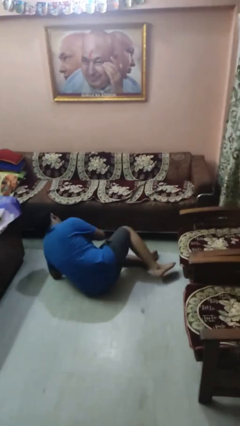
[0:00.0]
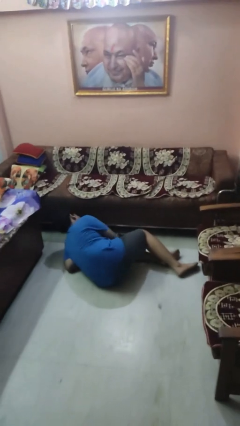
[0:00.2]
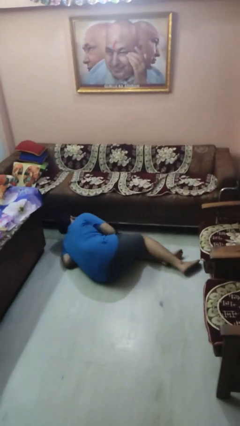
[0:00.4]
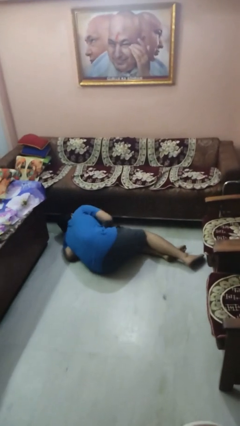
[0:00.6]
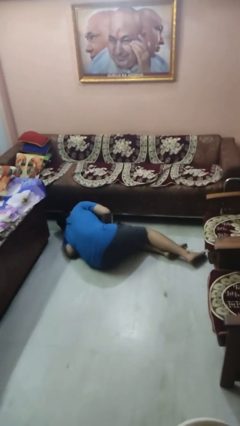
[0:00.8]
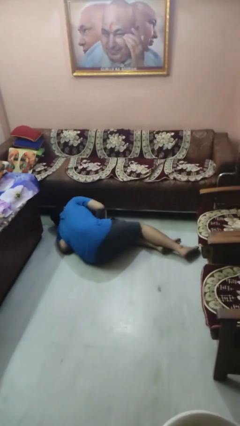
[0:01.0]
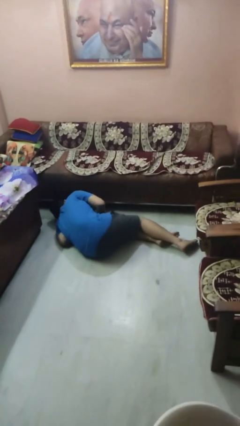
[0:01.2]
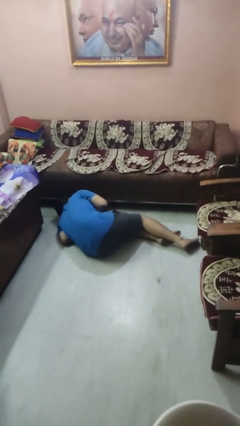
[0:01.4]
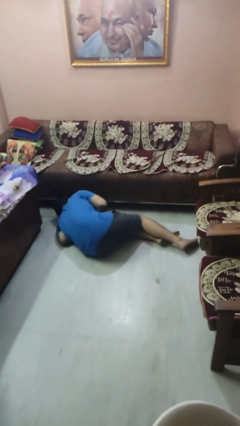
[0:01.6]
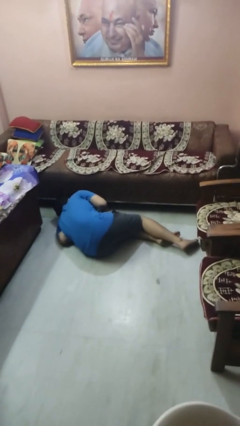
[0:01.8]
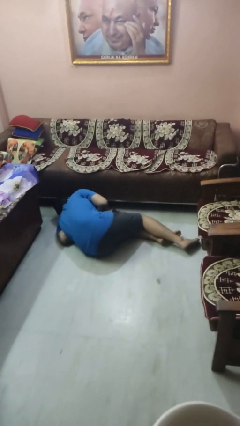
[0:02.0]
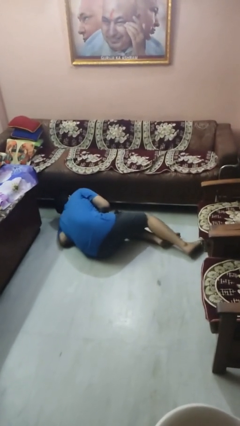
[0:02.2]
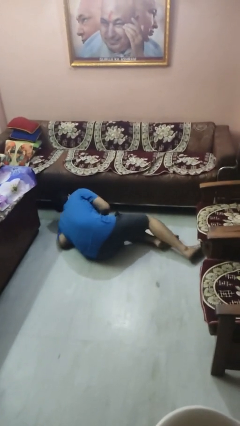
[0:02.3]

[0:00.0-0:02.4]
person lies down on floor

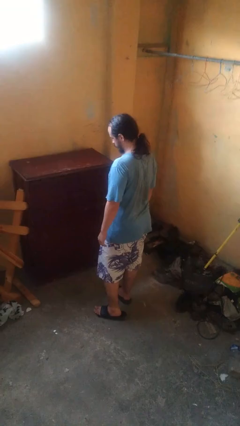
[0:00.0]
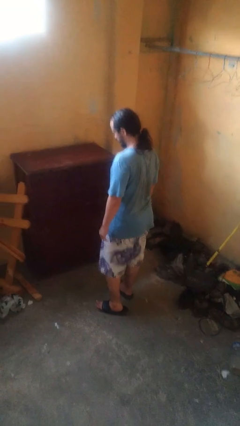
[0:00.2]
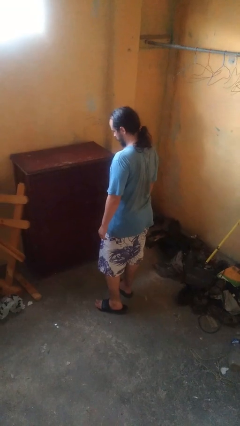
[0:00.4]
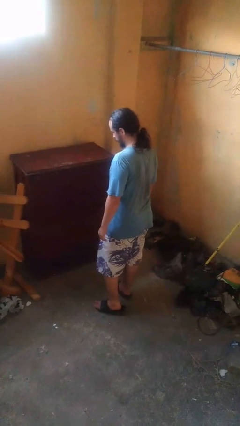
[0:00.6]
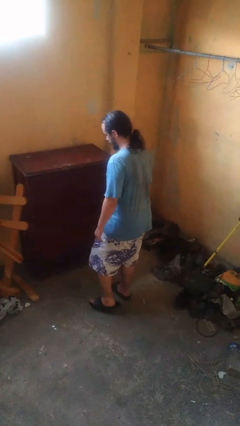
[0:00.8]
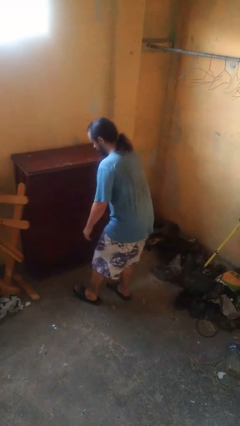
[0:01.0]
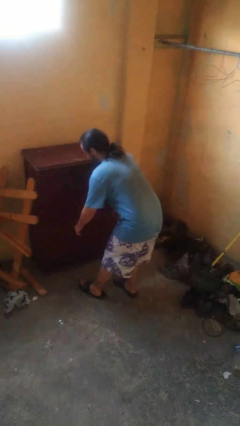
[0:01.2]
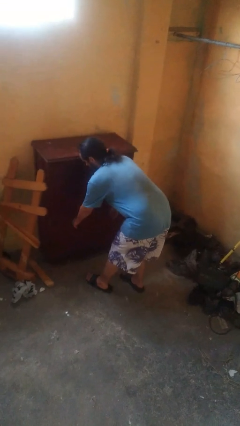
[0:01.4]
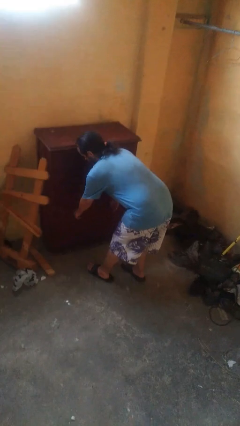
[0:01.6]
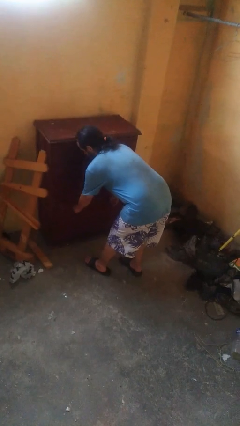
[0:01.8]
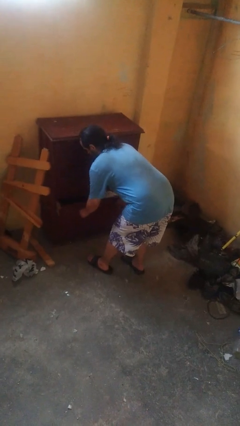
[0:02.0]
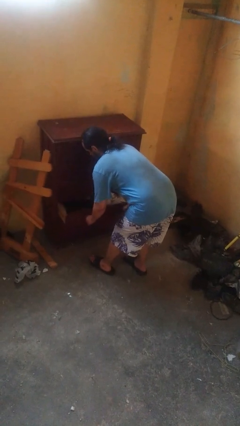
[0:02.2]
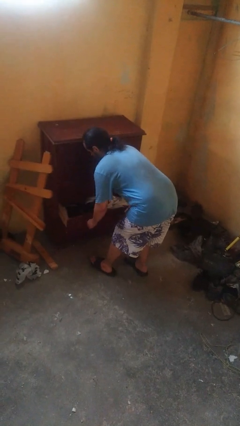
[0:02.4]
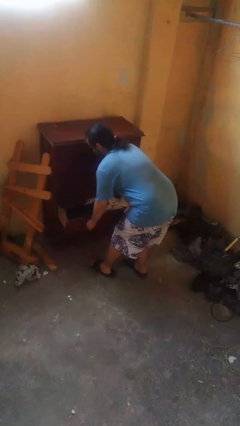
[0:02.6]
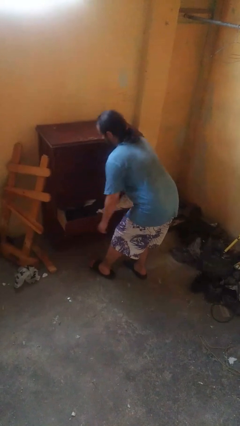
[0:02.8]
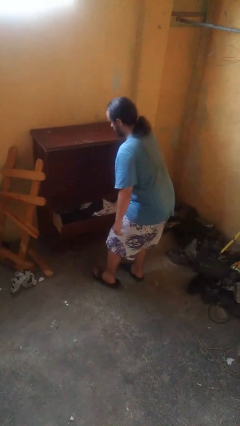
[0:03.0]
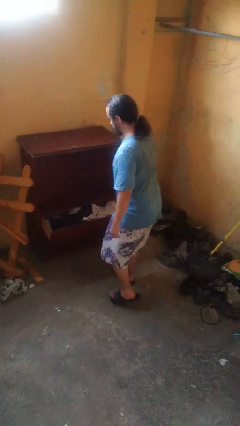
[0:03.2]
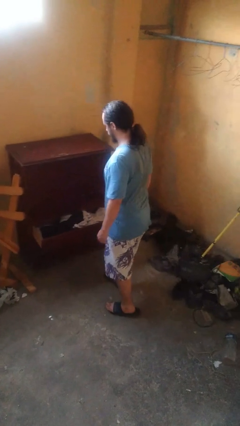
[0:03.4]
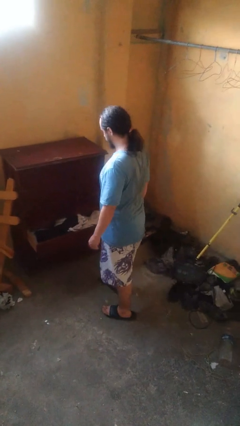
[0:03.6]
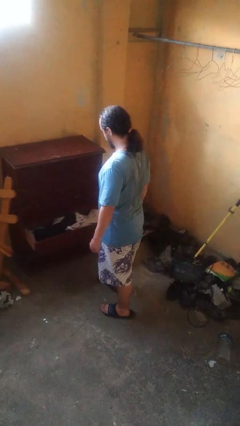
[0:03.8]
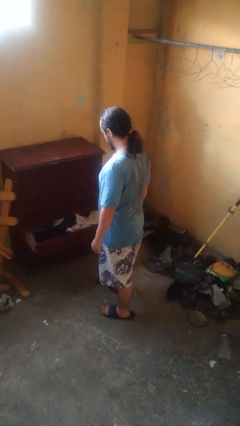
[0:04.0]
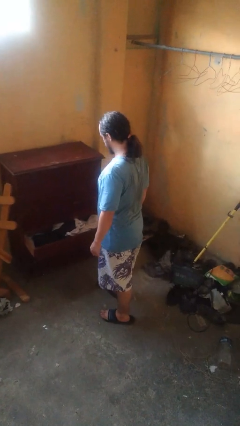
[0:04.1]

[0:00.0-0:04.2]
person opens dresser drawer

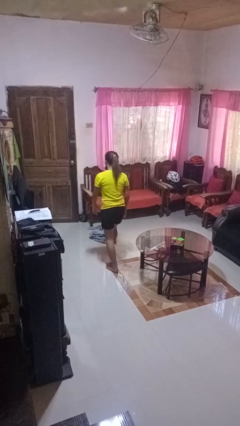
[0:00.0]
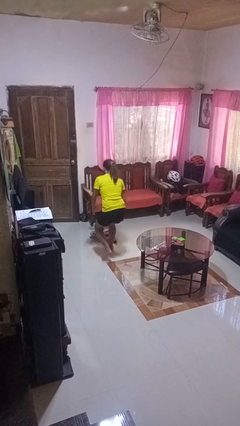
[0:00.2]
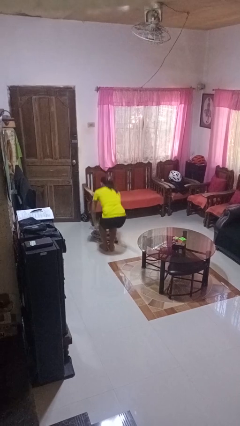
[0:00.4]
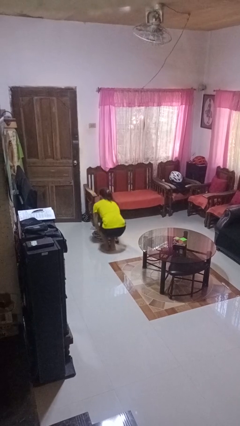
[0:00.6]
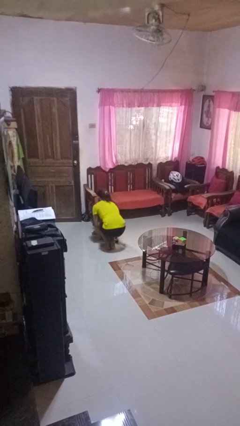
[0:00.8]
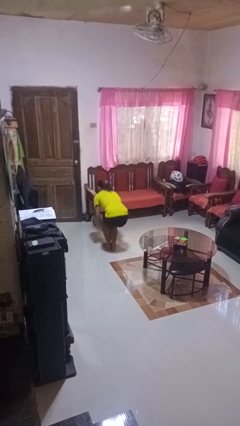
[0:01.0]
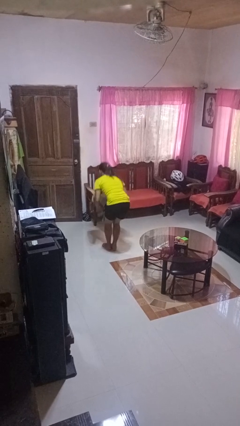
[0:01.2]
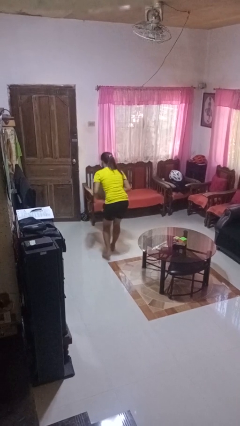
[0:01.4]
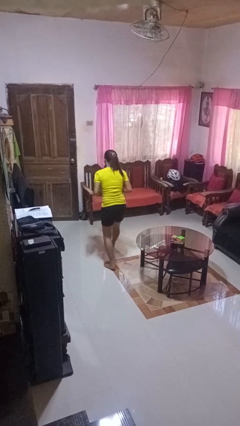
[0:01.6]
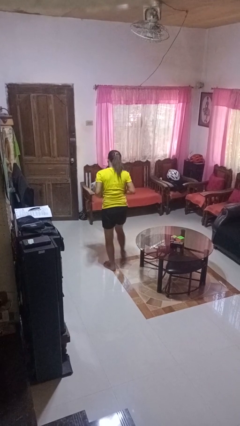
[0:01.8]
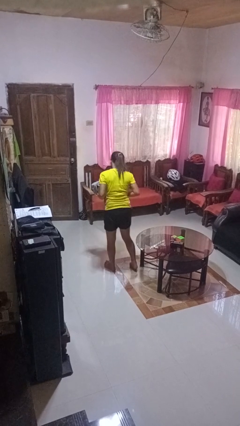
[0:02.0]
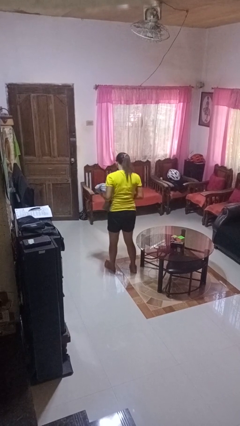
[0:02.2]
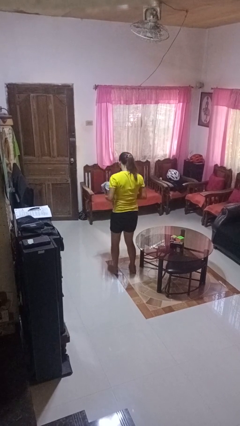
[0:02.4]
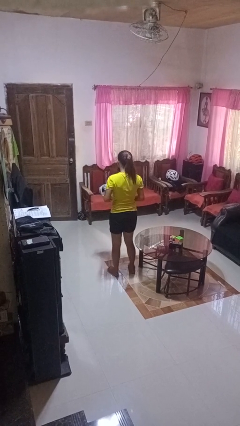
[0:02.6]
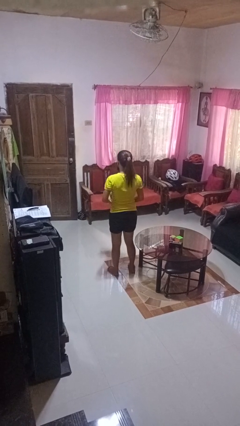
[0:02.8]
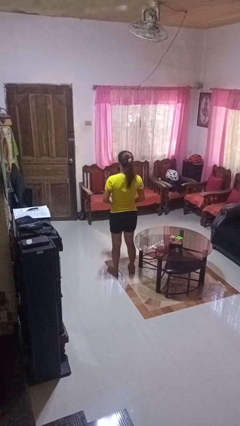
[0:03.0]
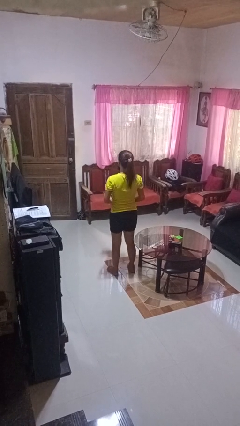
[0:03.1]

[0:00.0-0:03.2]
person picks up object from floor

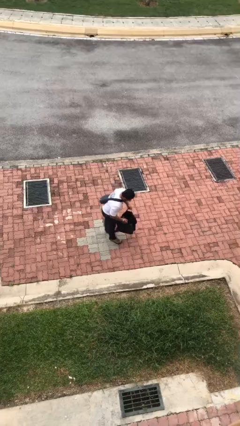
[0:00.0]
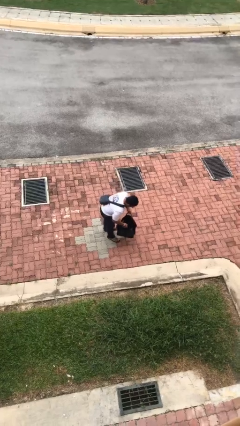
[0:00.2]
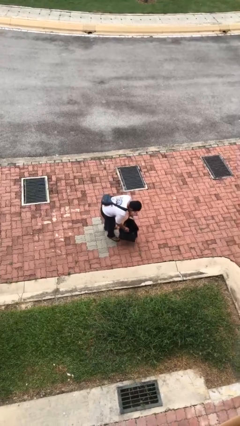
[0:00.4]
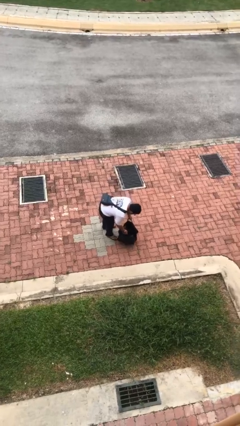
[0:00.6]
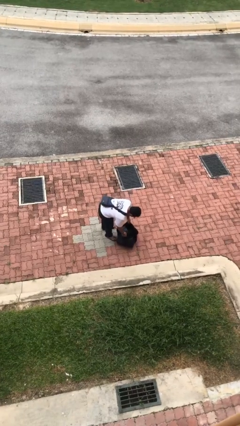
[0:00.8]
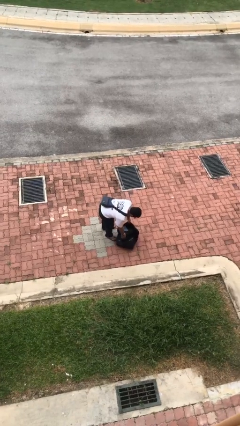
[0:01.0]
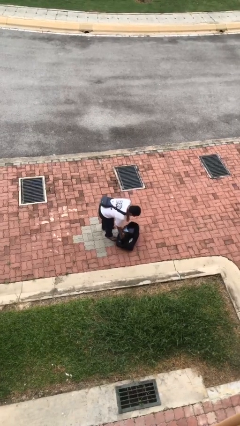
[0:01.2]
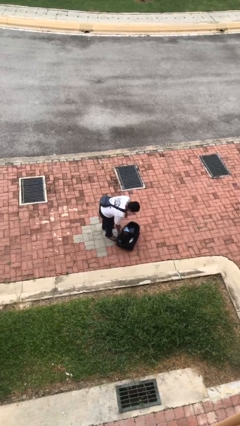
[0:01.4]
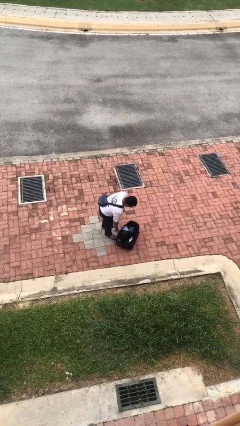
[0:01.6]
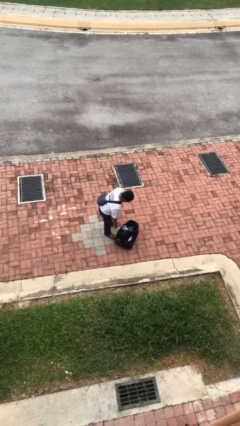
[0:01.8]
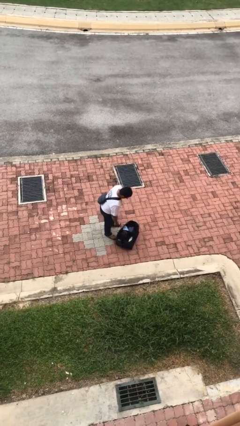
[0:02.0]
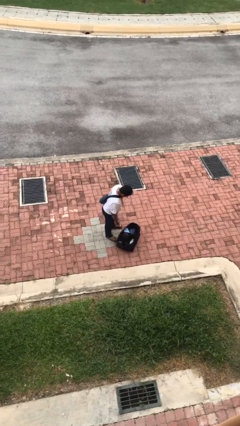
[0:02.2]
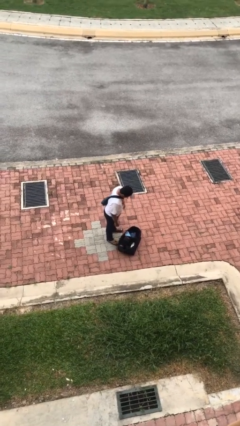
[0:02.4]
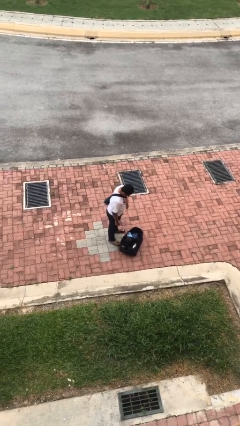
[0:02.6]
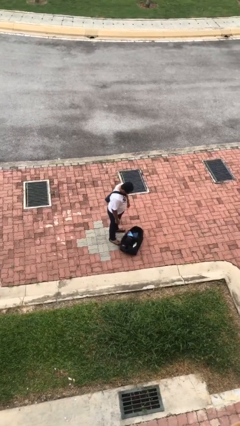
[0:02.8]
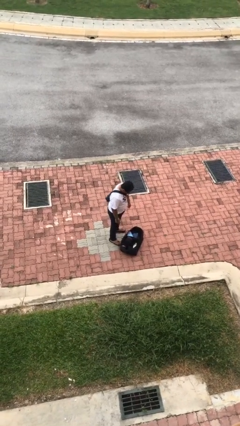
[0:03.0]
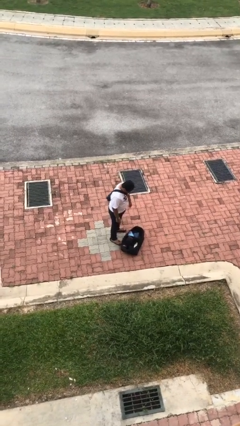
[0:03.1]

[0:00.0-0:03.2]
person puts down object on floor

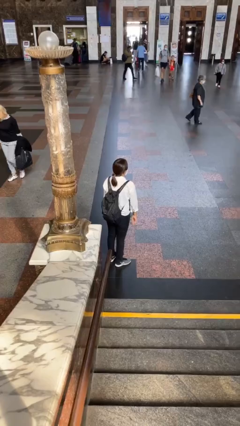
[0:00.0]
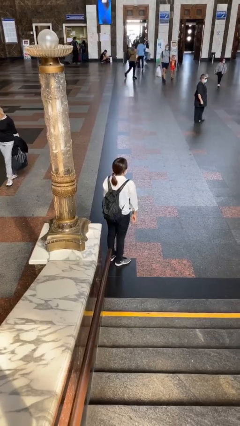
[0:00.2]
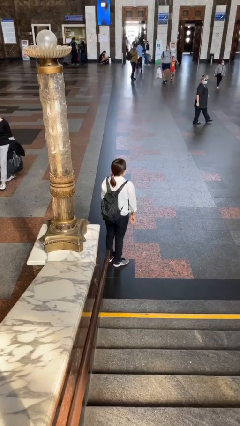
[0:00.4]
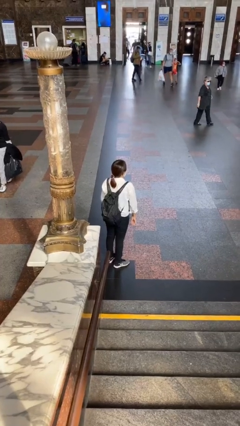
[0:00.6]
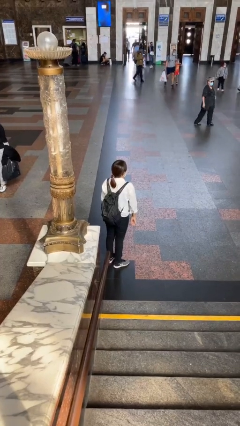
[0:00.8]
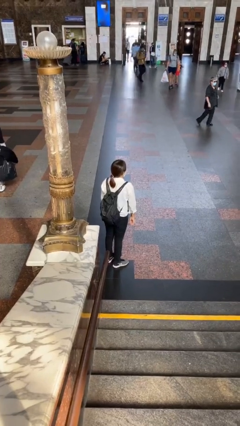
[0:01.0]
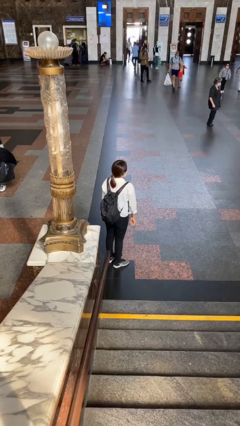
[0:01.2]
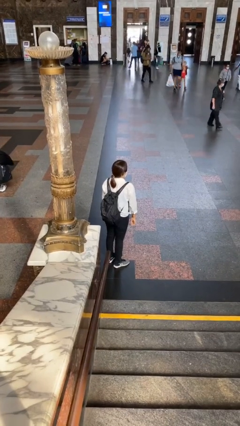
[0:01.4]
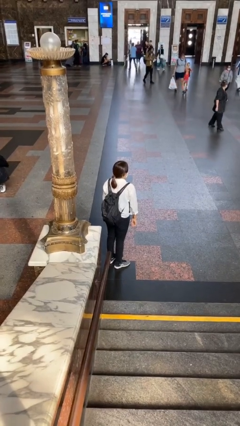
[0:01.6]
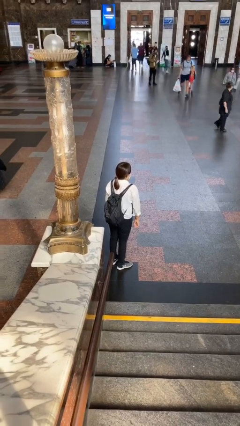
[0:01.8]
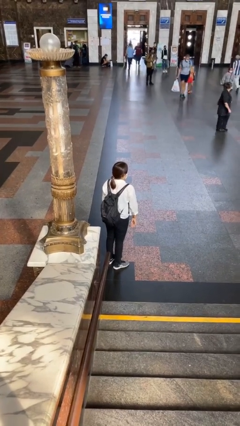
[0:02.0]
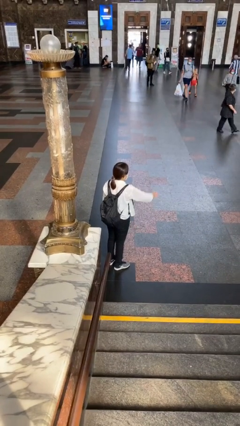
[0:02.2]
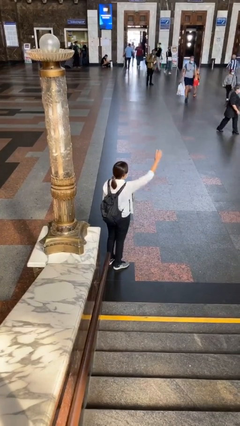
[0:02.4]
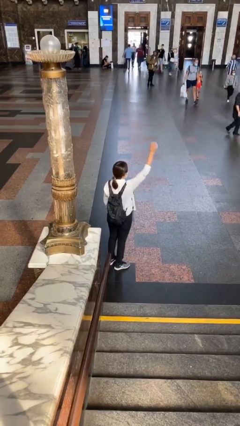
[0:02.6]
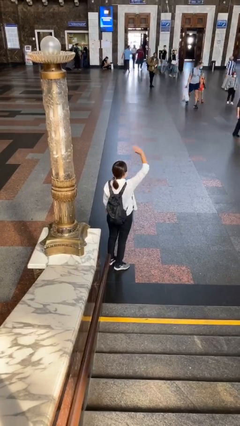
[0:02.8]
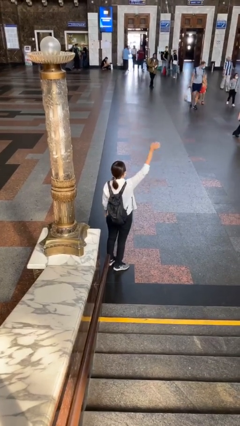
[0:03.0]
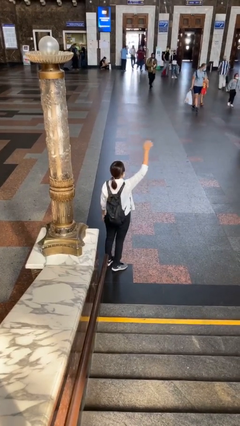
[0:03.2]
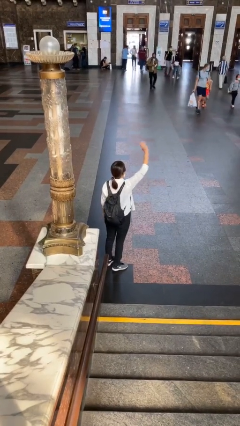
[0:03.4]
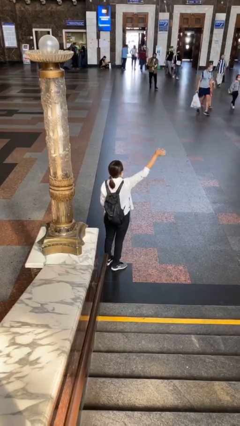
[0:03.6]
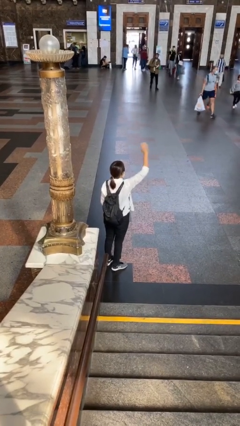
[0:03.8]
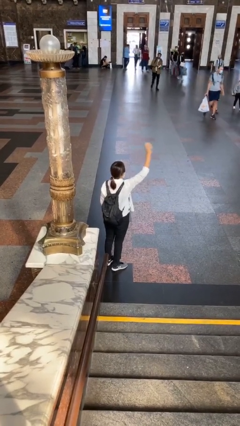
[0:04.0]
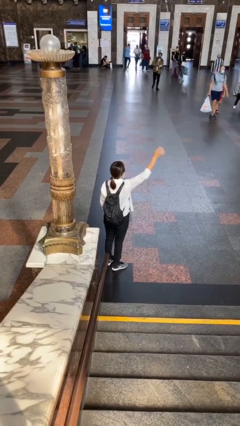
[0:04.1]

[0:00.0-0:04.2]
person waves at person

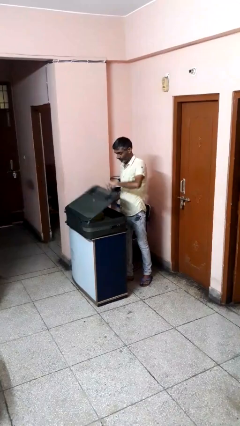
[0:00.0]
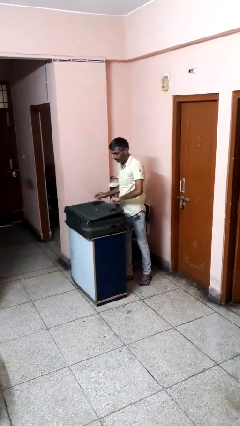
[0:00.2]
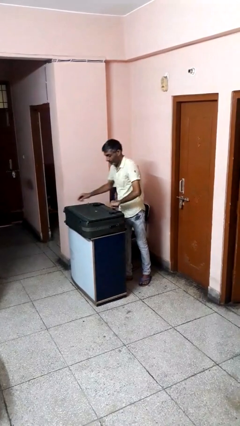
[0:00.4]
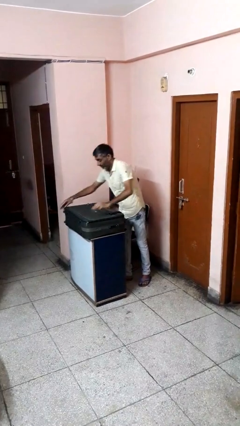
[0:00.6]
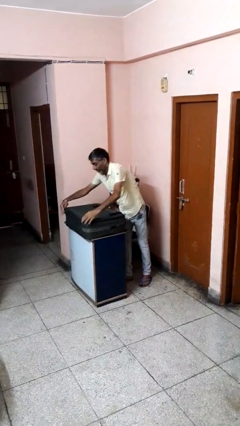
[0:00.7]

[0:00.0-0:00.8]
person closes suitcase
